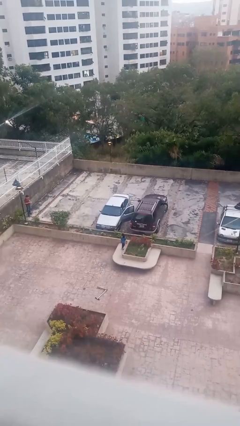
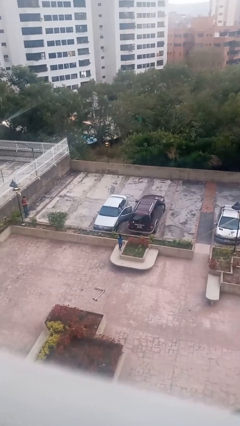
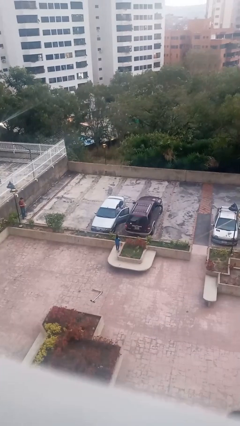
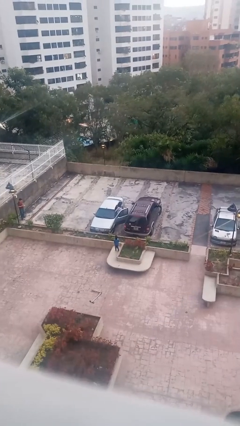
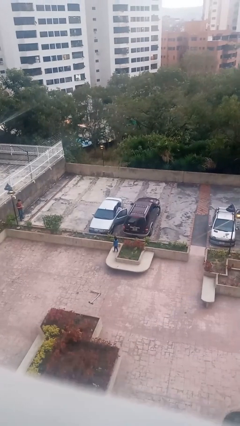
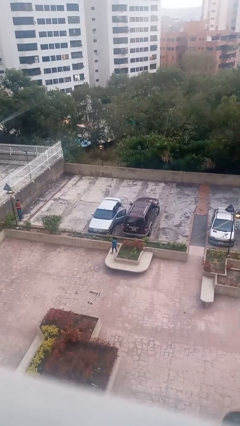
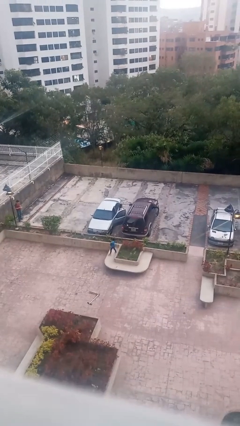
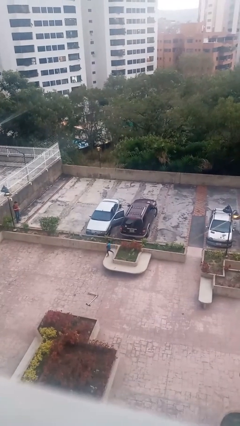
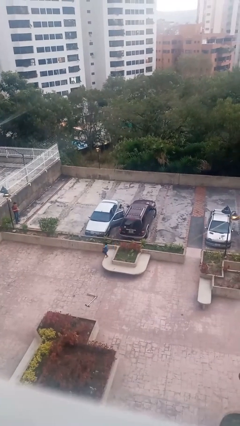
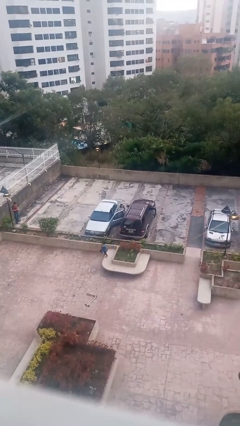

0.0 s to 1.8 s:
person exits car

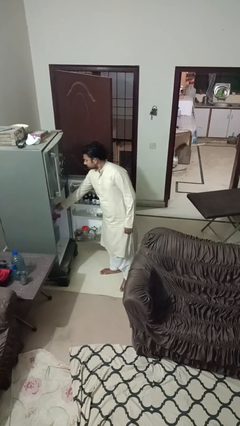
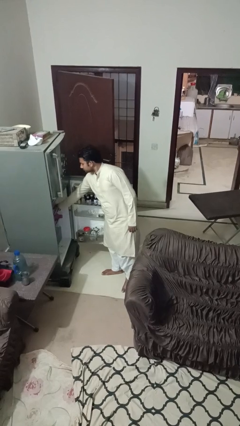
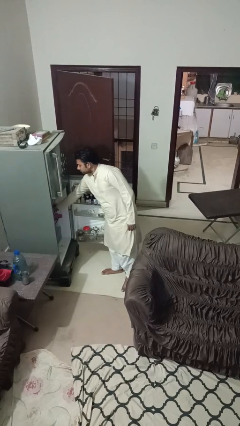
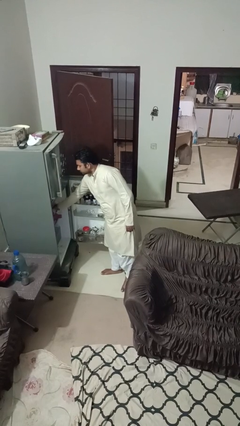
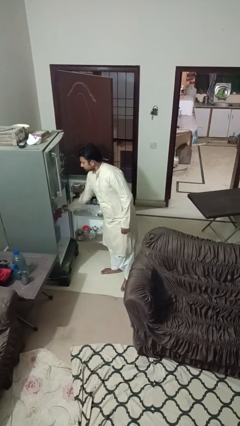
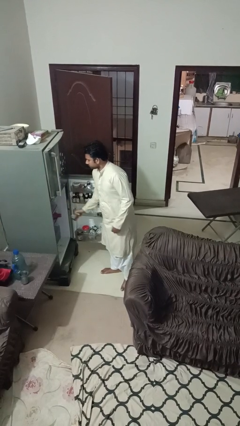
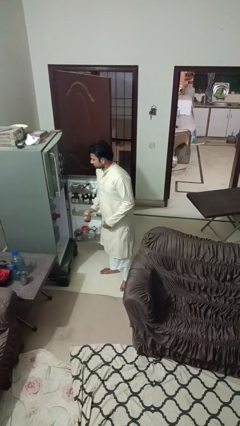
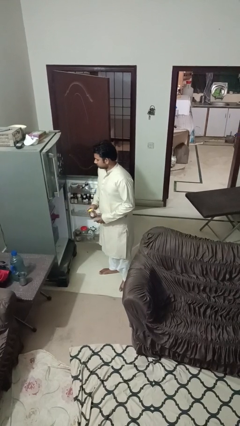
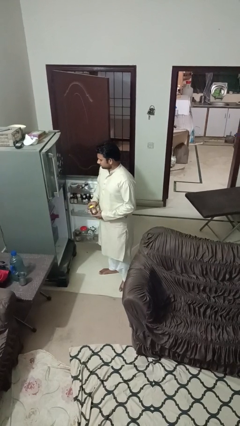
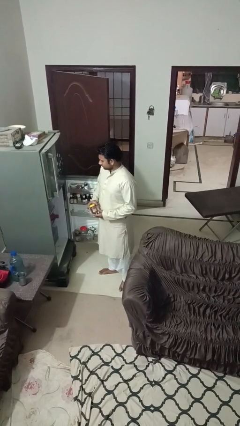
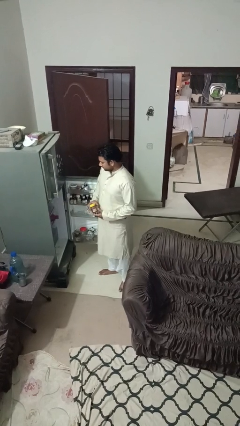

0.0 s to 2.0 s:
person takes object from refrigerator

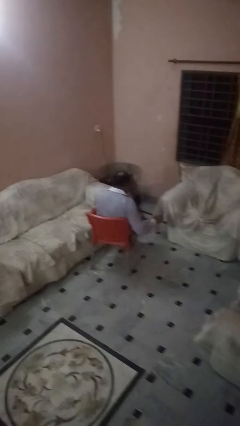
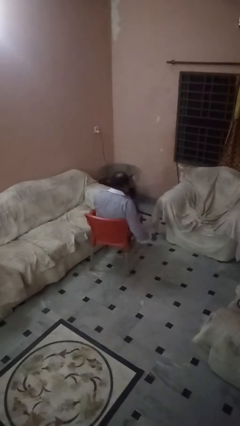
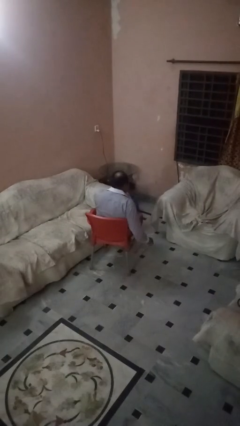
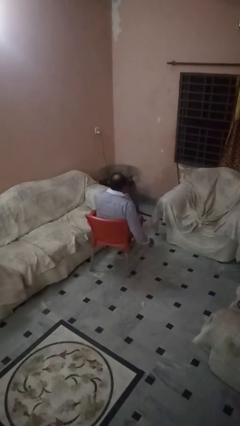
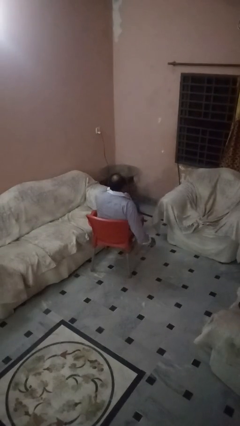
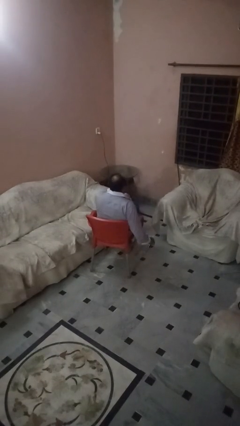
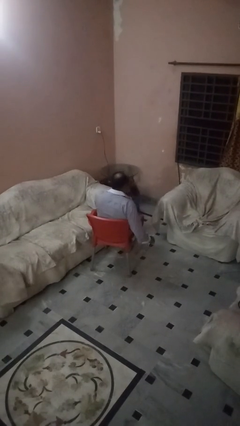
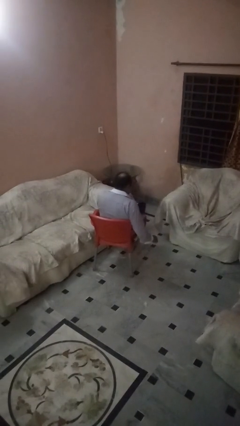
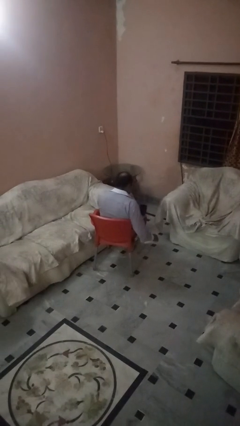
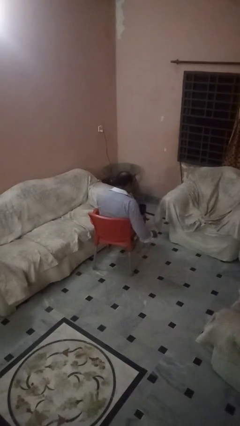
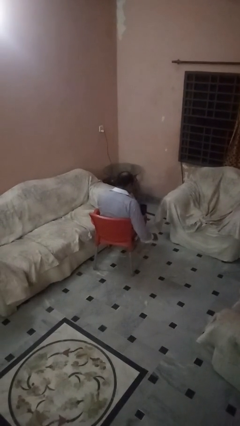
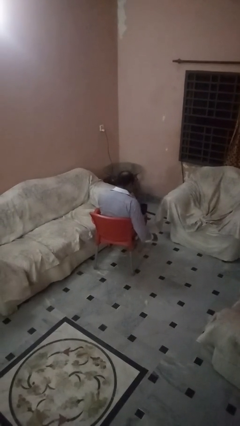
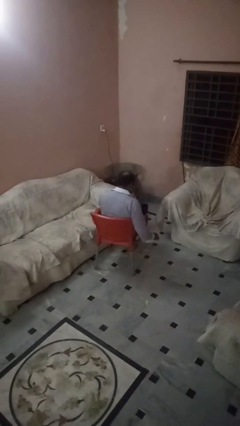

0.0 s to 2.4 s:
person drinks from mug

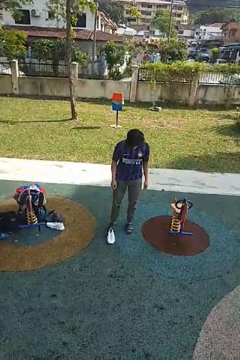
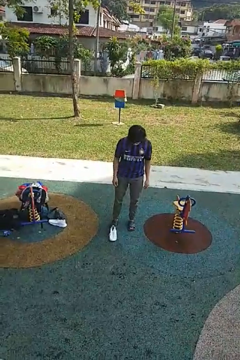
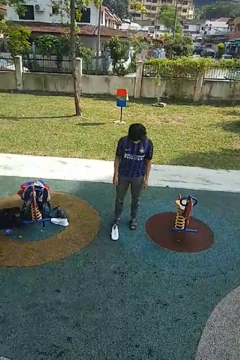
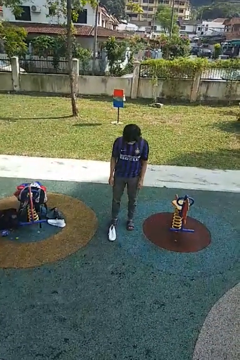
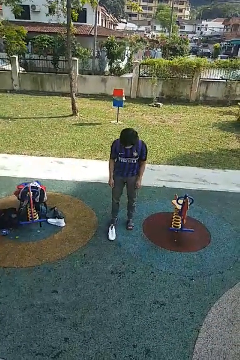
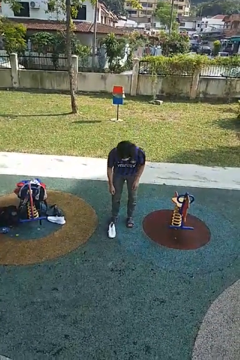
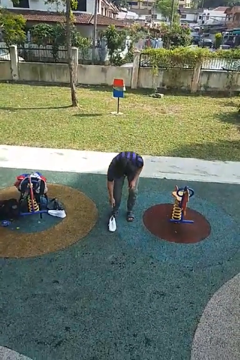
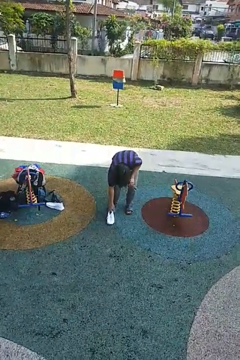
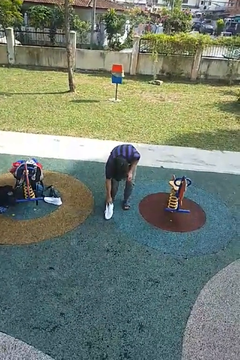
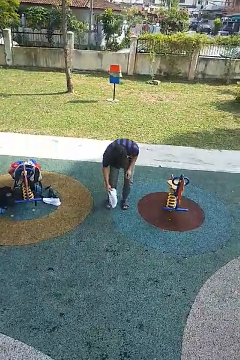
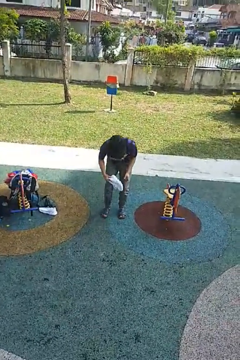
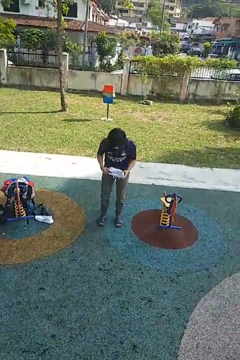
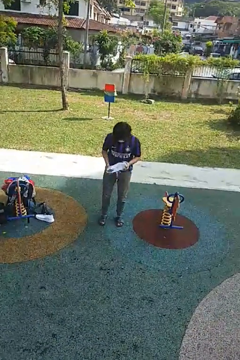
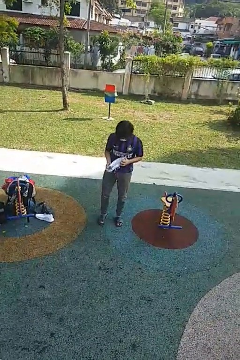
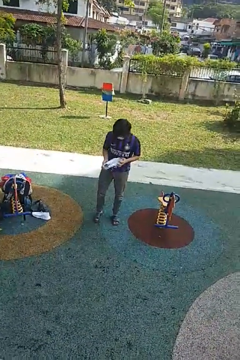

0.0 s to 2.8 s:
person picks up object from floor

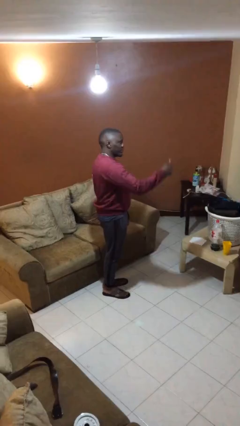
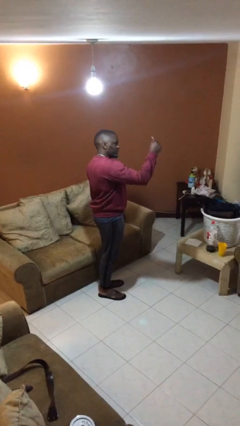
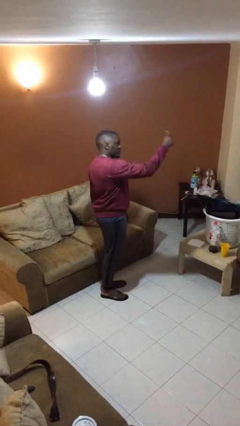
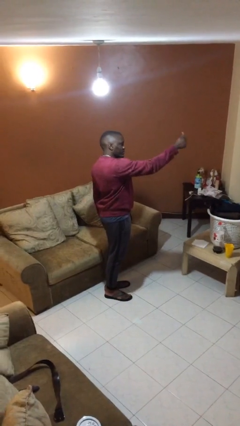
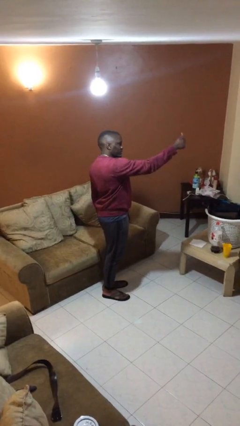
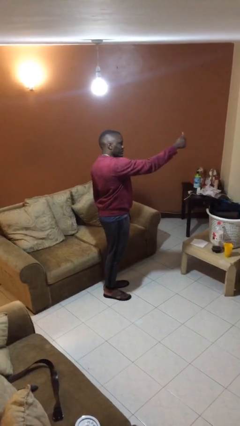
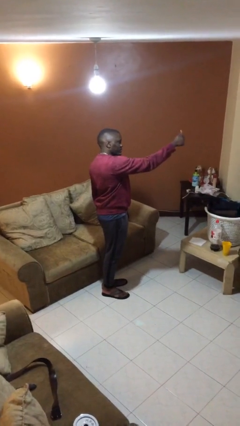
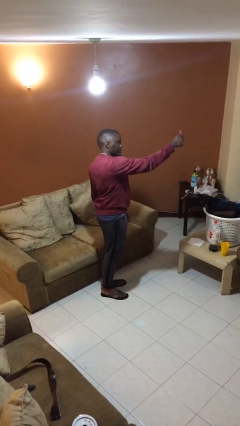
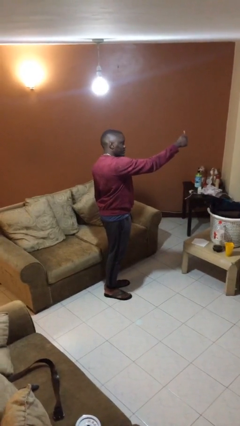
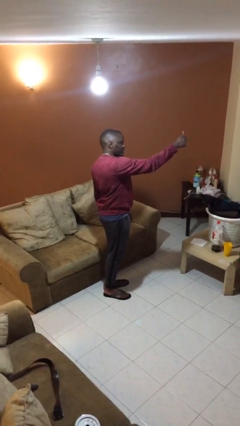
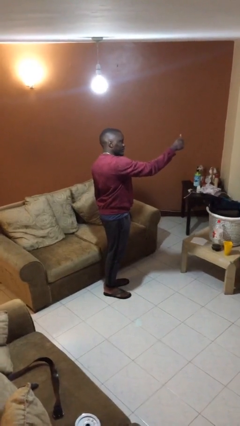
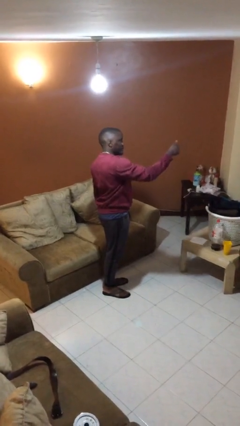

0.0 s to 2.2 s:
person gestures thumbs up

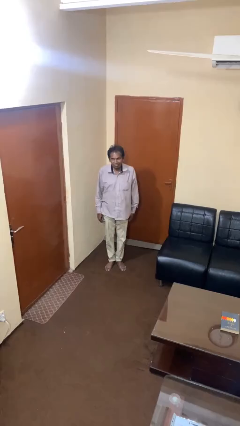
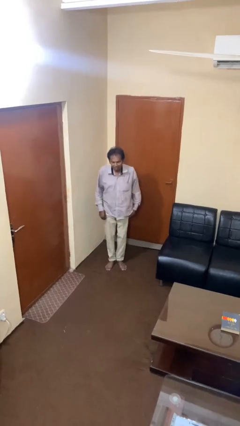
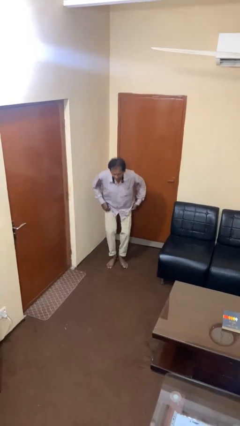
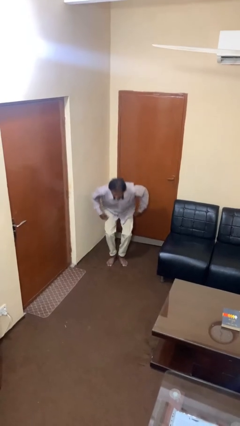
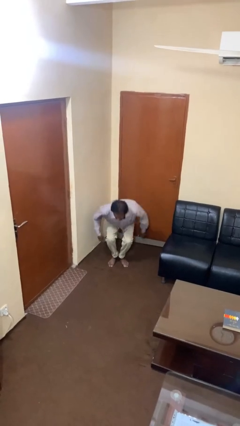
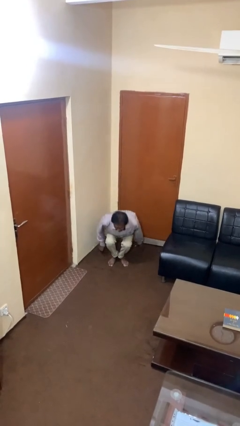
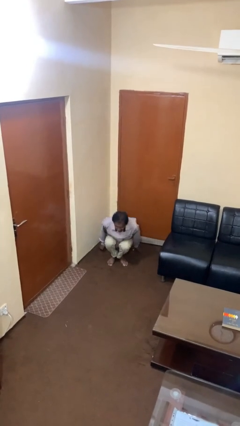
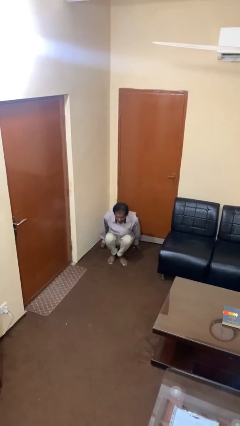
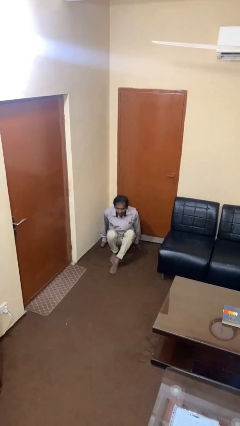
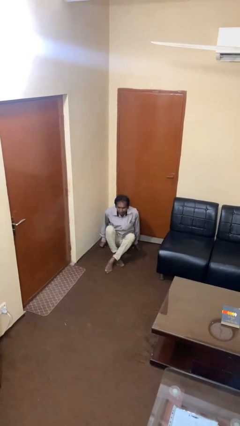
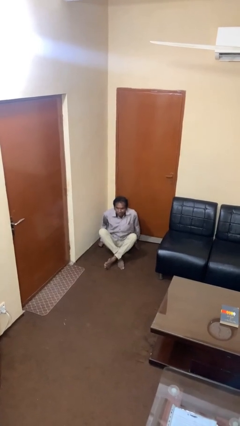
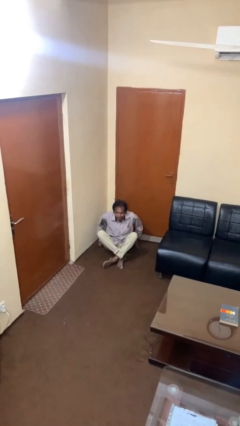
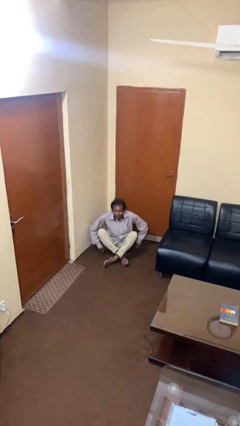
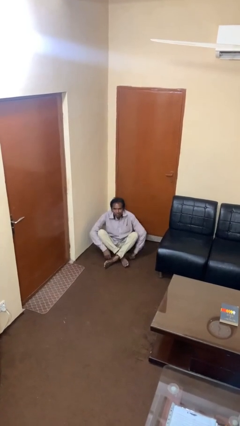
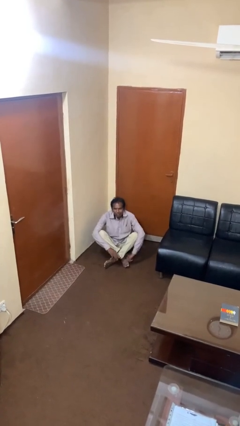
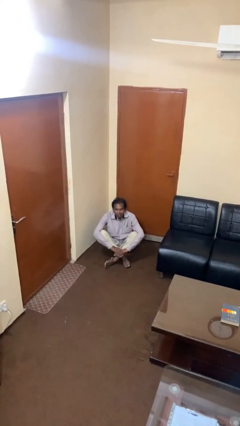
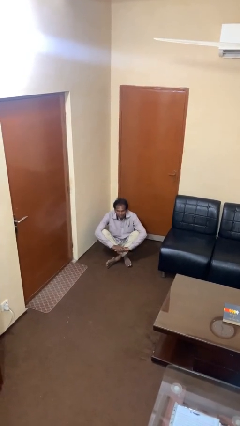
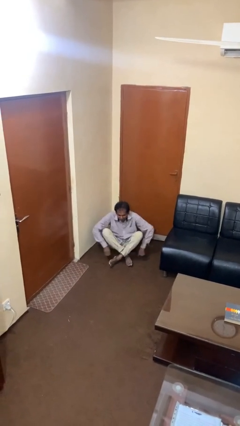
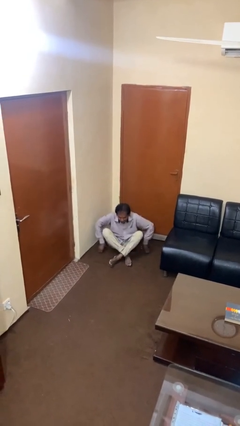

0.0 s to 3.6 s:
person sits crisscross

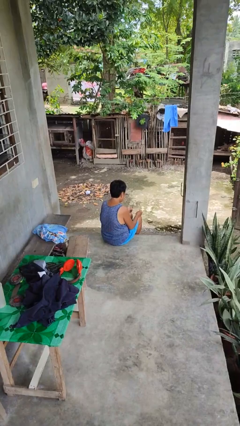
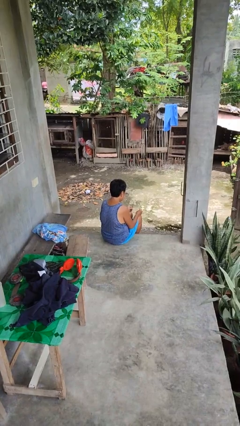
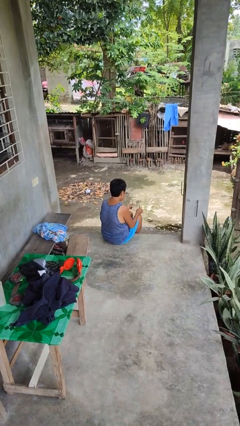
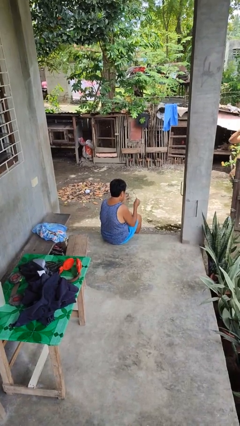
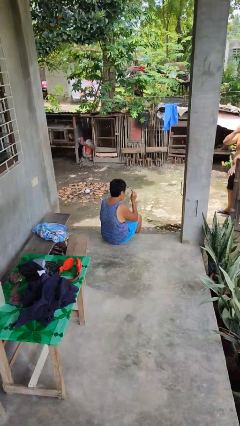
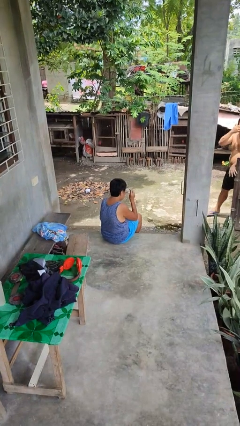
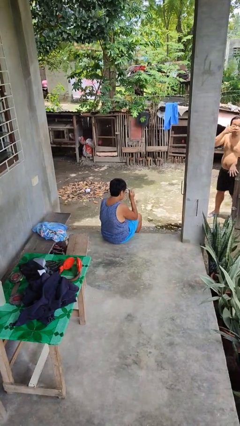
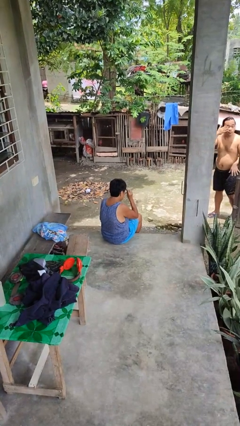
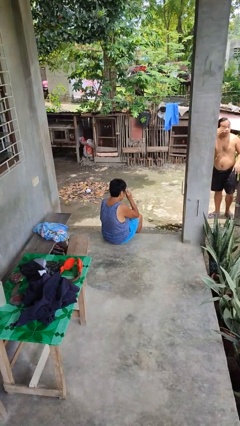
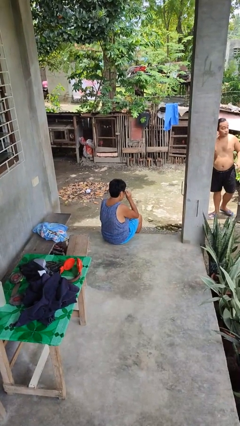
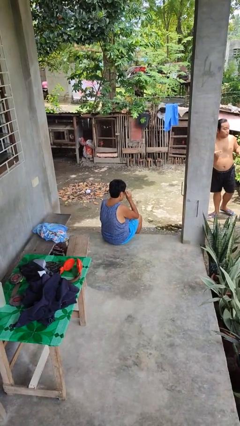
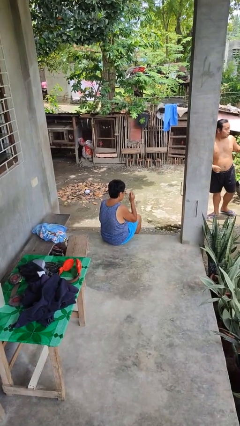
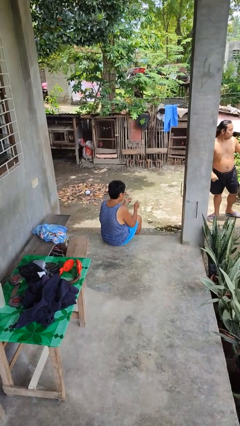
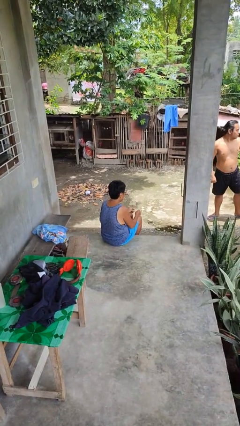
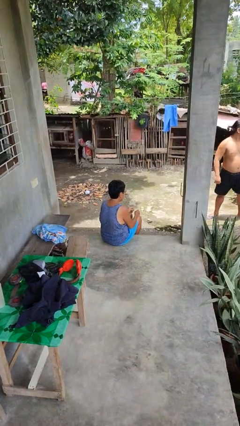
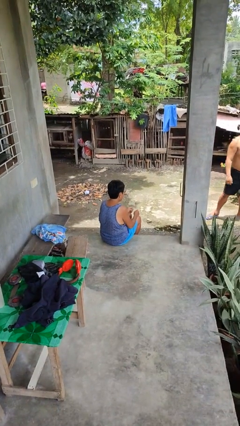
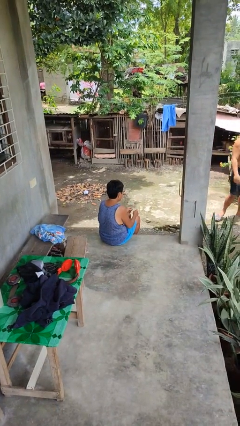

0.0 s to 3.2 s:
person puts on glasses
